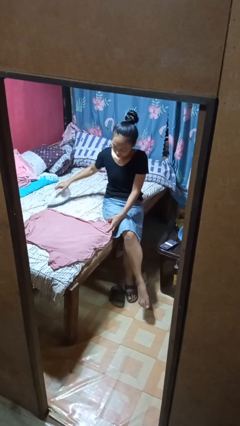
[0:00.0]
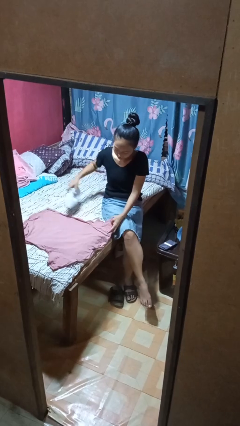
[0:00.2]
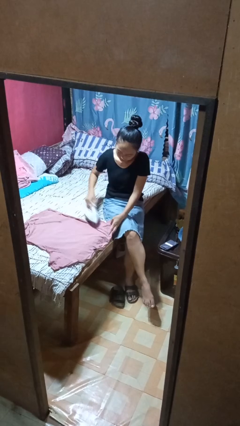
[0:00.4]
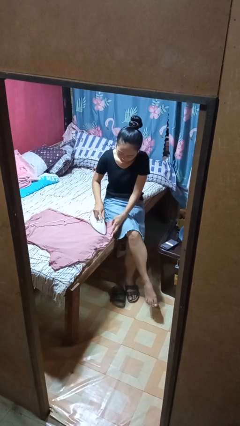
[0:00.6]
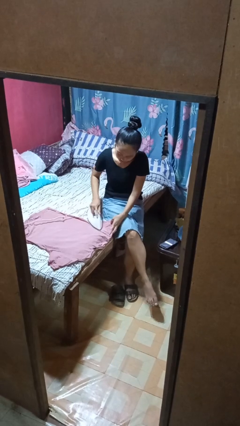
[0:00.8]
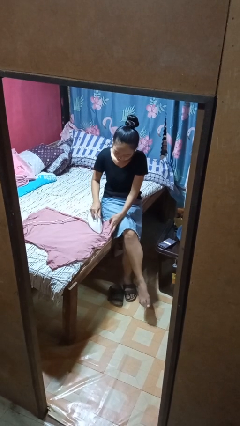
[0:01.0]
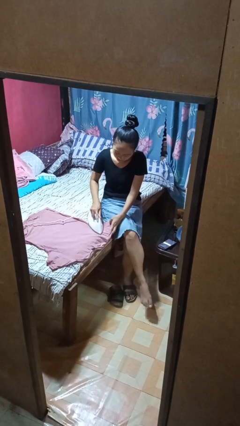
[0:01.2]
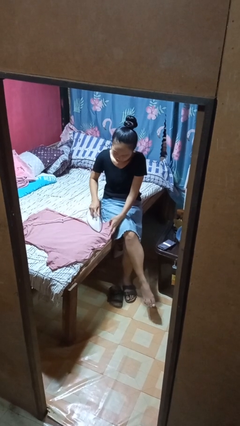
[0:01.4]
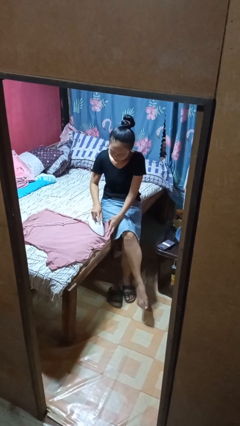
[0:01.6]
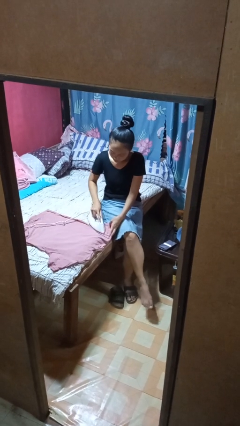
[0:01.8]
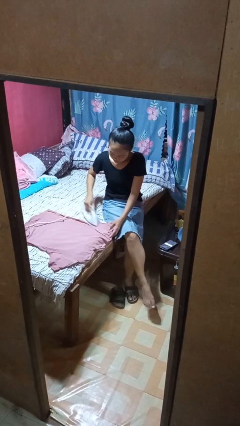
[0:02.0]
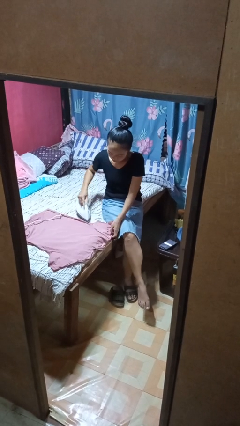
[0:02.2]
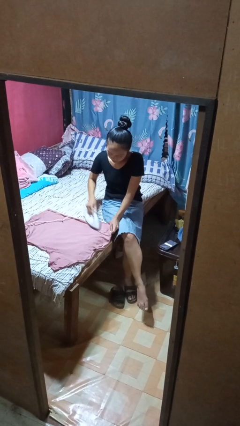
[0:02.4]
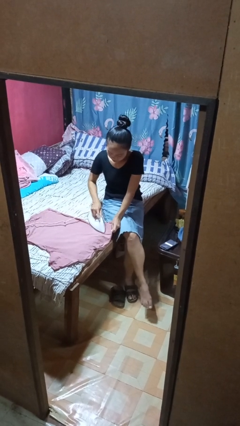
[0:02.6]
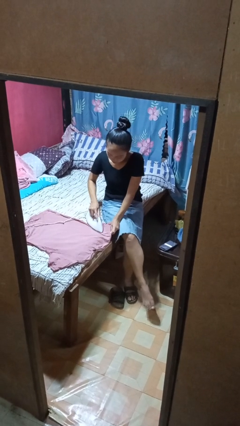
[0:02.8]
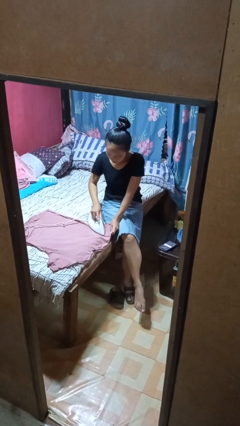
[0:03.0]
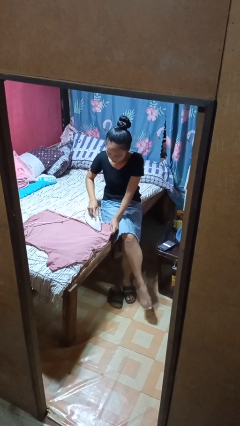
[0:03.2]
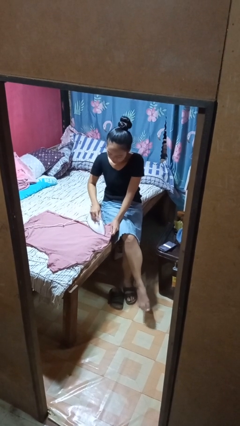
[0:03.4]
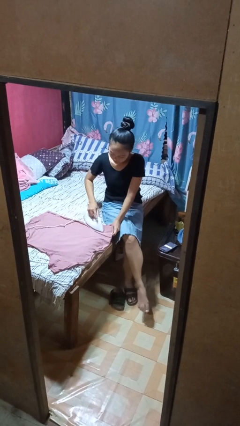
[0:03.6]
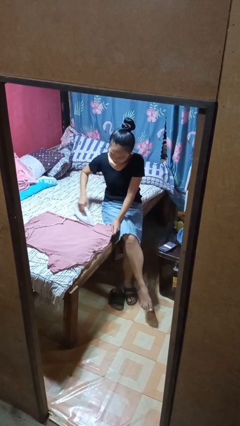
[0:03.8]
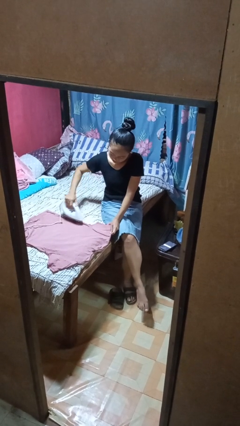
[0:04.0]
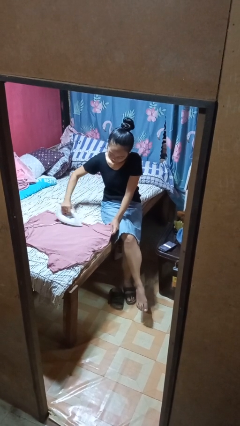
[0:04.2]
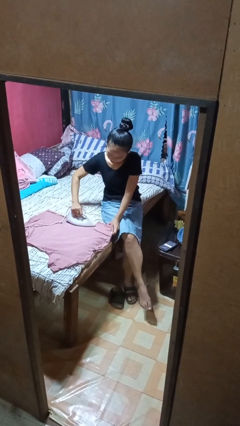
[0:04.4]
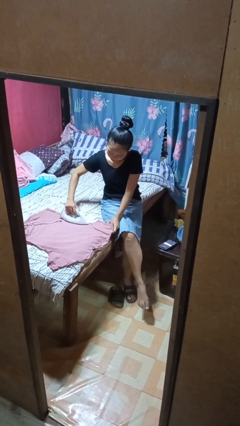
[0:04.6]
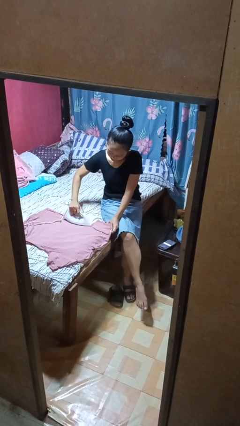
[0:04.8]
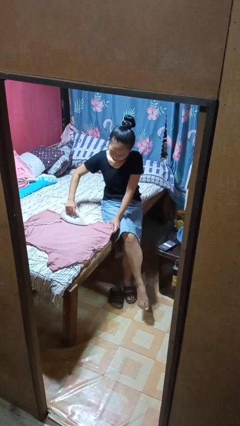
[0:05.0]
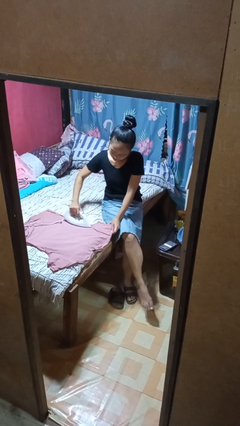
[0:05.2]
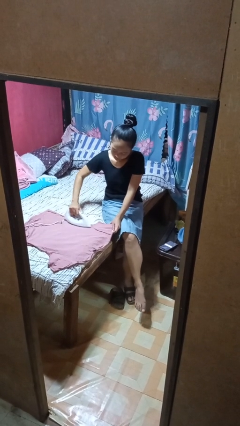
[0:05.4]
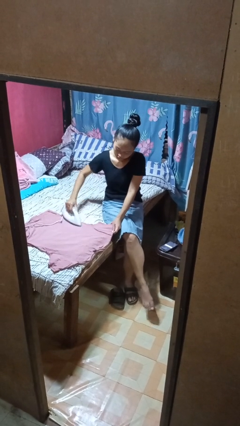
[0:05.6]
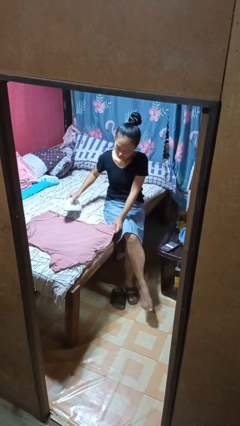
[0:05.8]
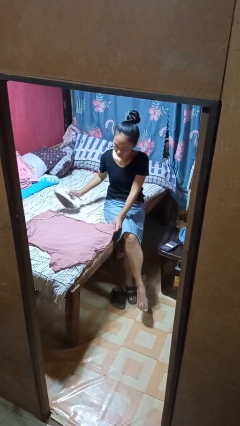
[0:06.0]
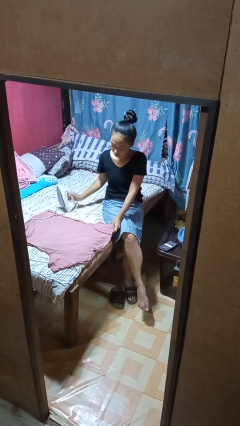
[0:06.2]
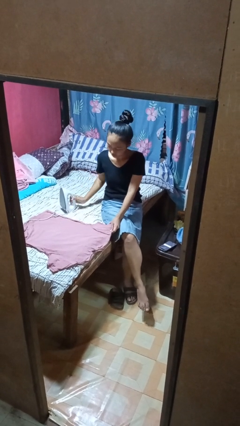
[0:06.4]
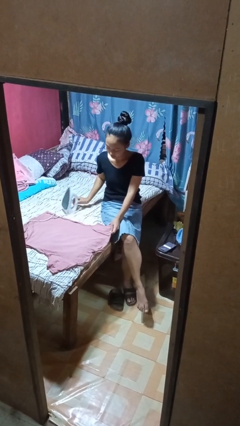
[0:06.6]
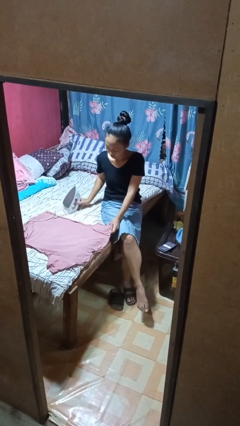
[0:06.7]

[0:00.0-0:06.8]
person irons clothes

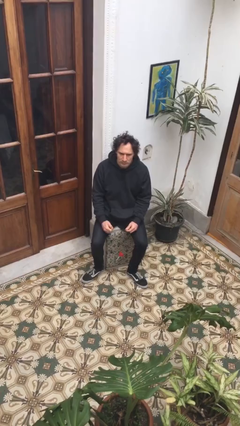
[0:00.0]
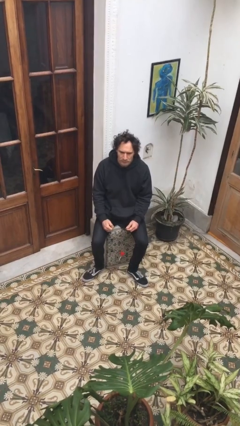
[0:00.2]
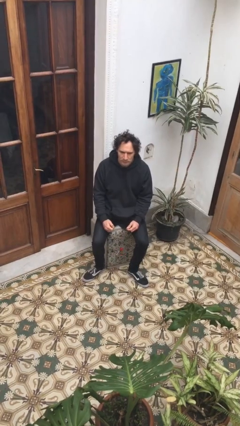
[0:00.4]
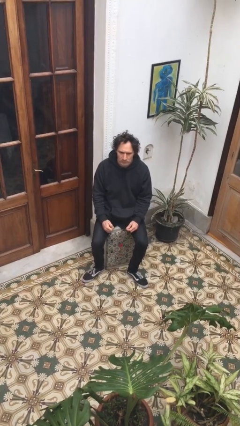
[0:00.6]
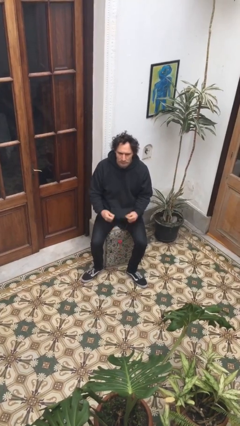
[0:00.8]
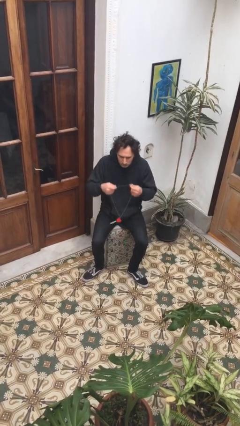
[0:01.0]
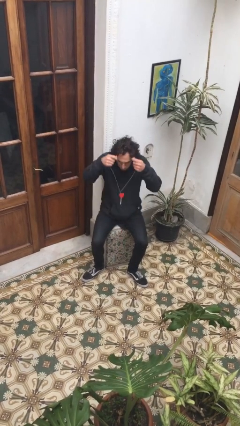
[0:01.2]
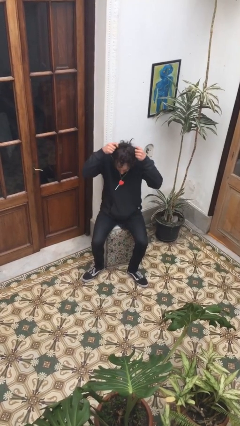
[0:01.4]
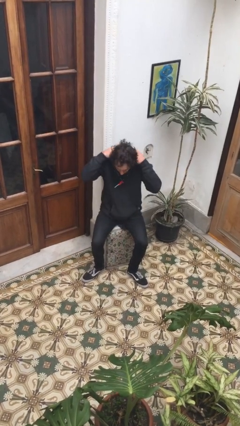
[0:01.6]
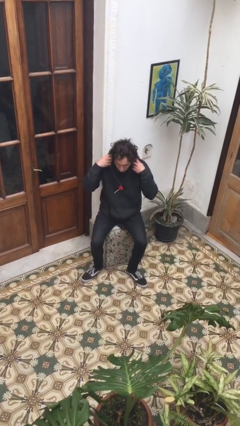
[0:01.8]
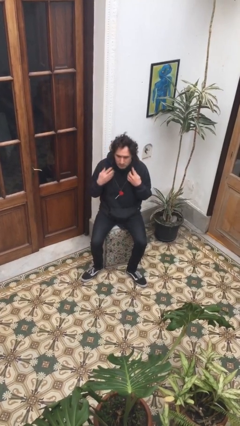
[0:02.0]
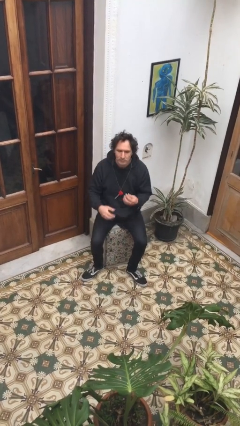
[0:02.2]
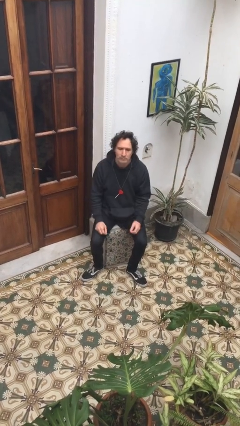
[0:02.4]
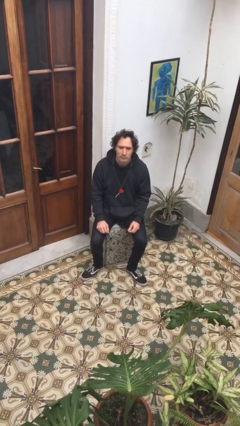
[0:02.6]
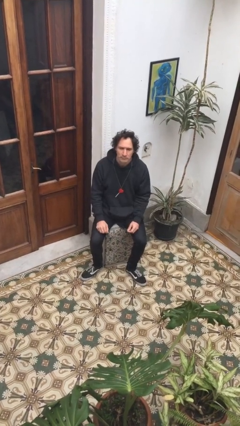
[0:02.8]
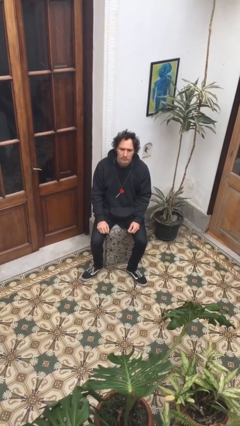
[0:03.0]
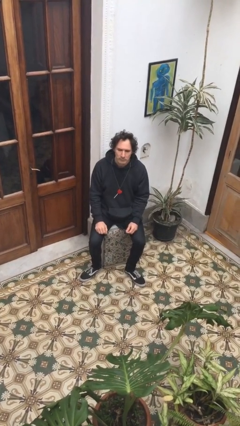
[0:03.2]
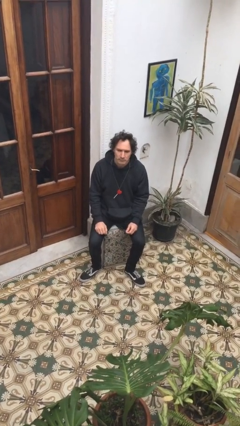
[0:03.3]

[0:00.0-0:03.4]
person puts on necklace

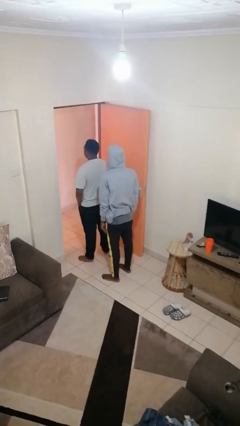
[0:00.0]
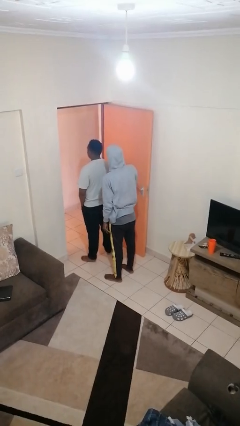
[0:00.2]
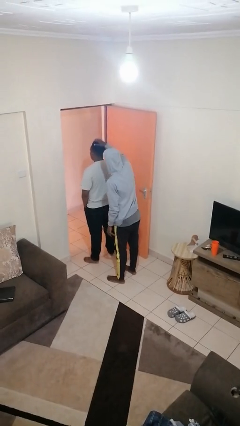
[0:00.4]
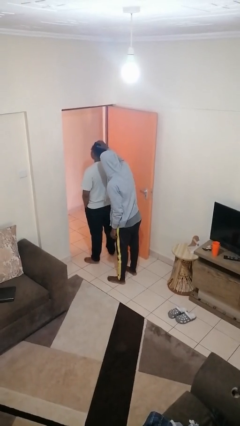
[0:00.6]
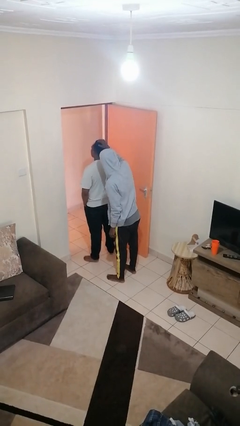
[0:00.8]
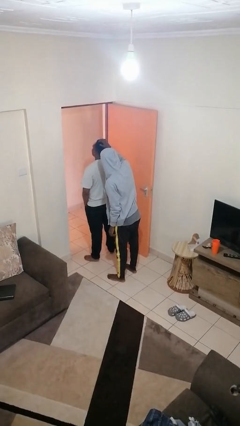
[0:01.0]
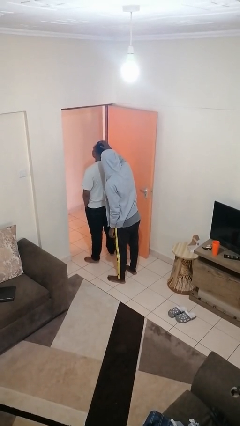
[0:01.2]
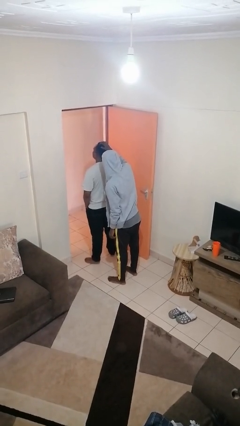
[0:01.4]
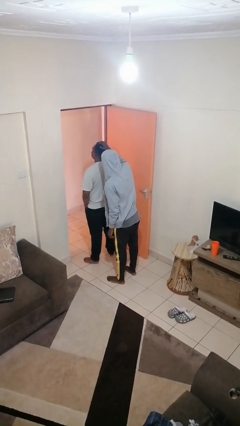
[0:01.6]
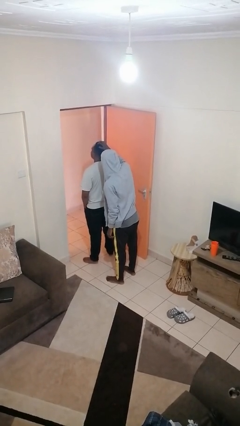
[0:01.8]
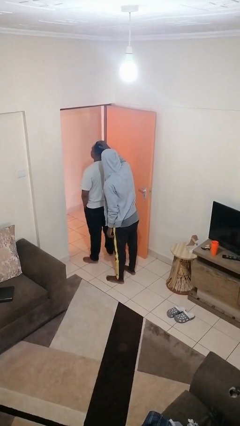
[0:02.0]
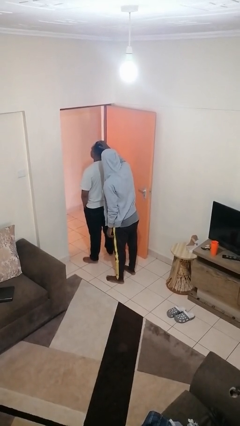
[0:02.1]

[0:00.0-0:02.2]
person grabs person by hair

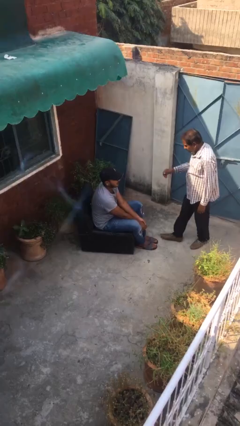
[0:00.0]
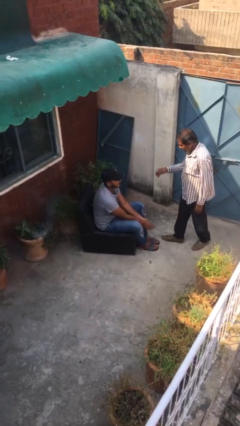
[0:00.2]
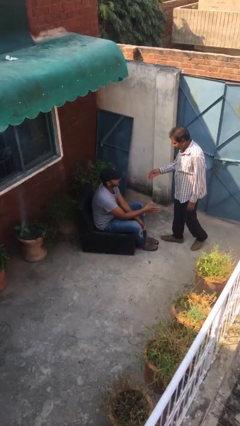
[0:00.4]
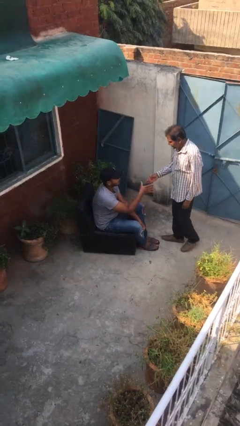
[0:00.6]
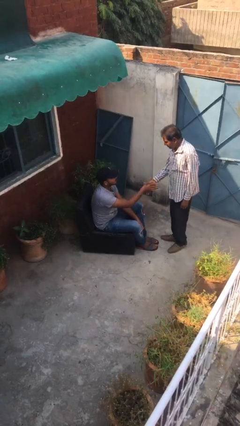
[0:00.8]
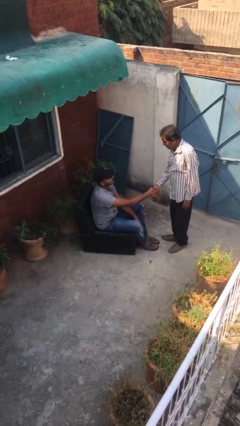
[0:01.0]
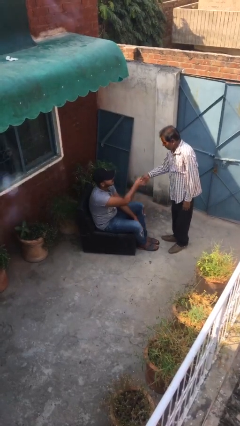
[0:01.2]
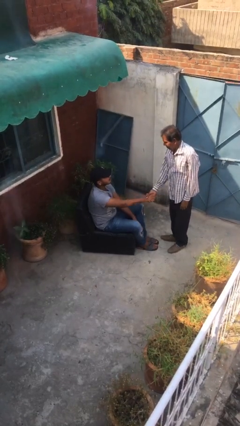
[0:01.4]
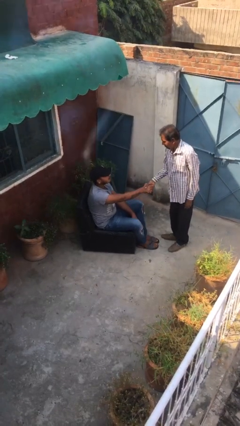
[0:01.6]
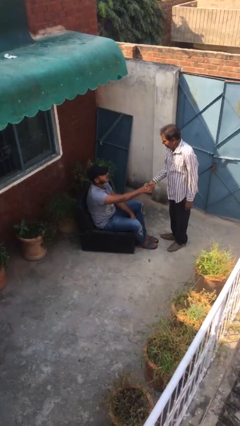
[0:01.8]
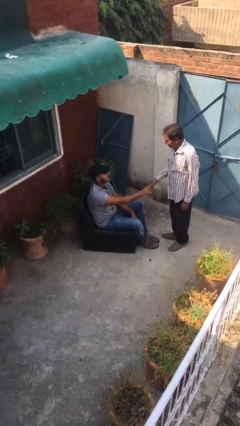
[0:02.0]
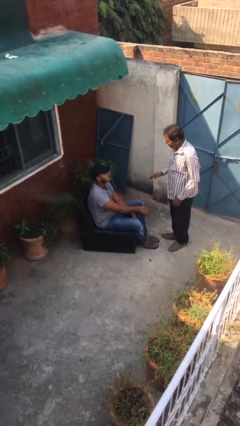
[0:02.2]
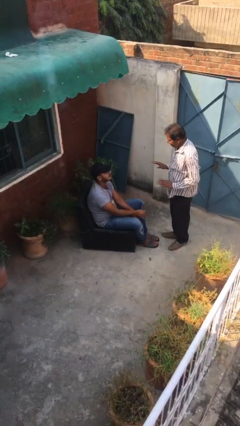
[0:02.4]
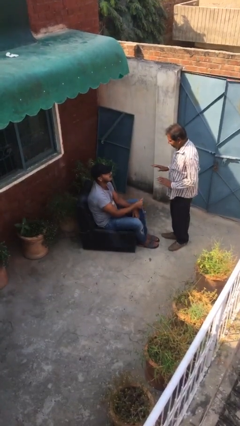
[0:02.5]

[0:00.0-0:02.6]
person shakes hand

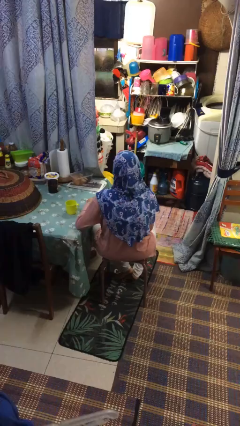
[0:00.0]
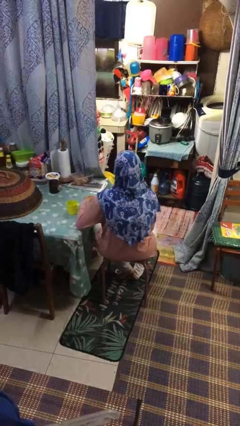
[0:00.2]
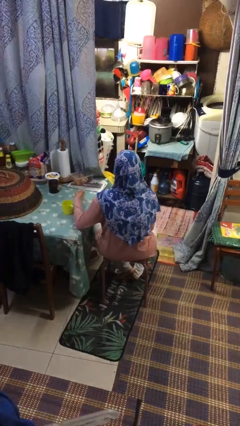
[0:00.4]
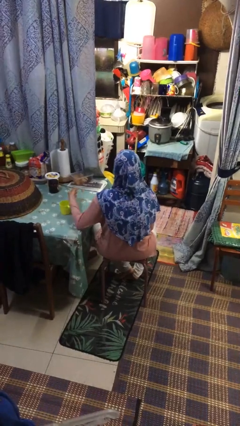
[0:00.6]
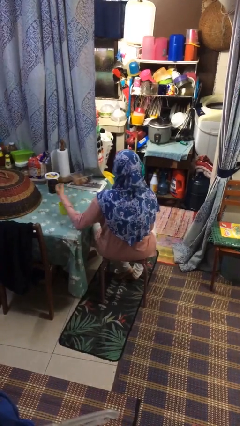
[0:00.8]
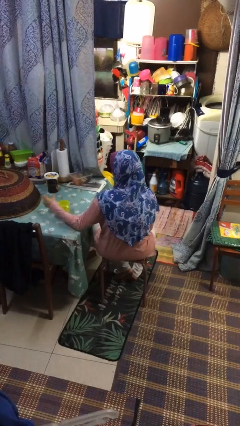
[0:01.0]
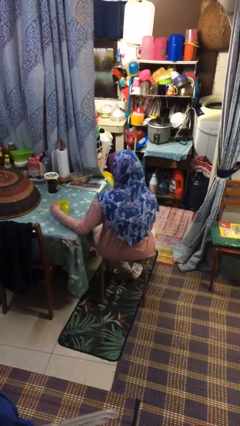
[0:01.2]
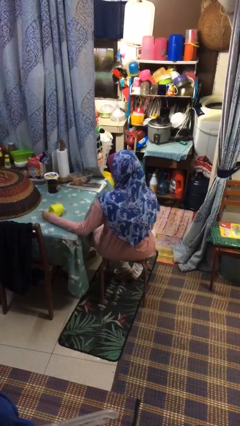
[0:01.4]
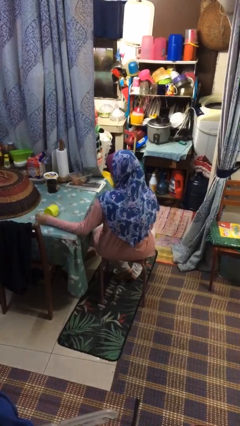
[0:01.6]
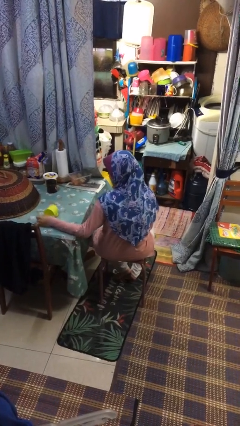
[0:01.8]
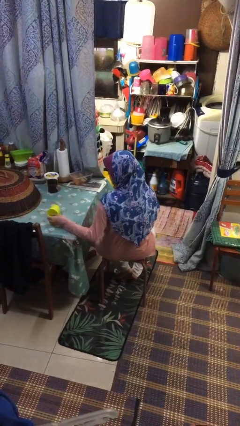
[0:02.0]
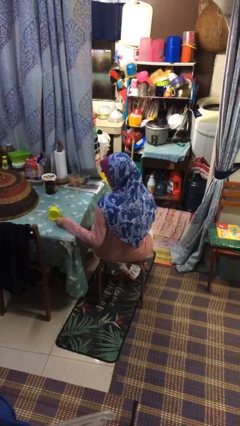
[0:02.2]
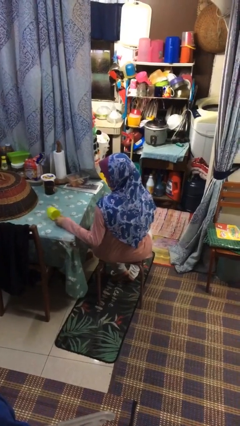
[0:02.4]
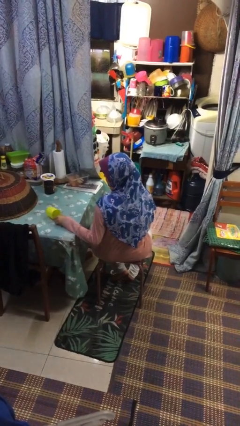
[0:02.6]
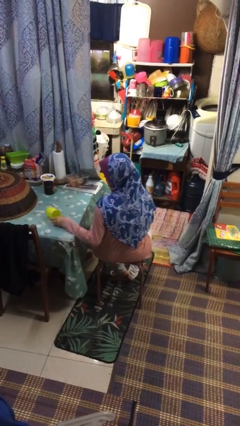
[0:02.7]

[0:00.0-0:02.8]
person knocks over glass
